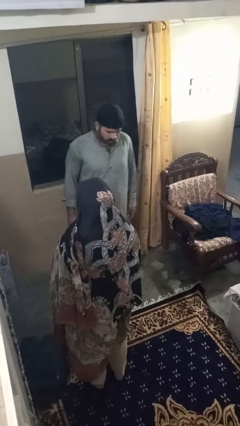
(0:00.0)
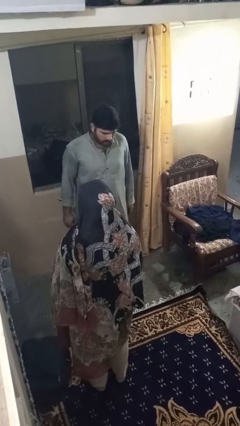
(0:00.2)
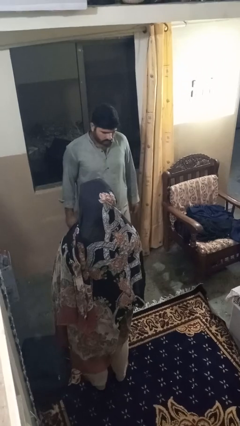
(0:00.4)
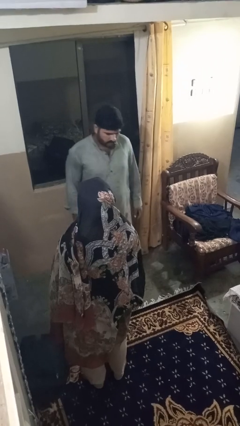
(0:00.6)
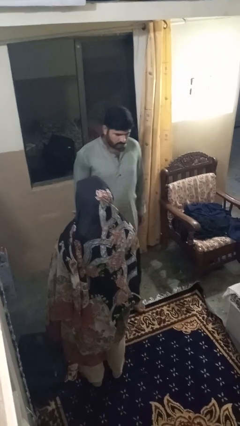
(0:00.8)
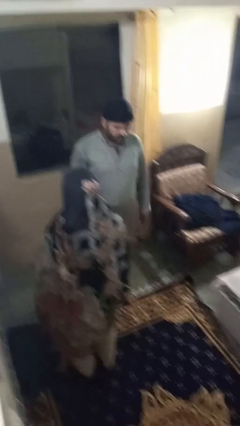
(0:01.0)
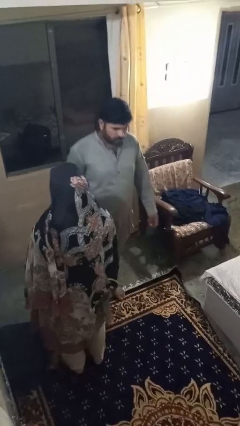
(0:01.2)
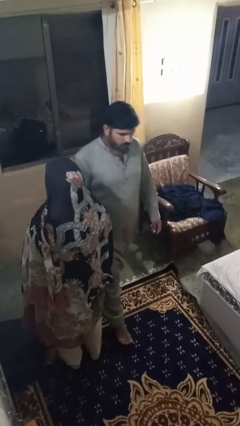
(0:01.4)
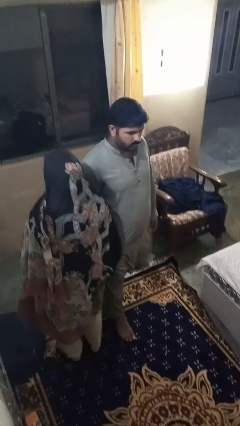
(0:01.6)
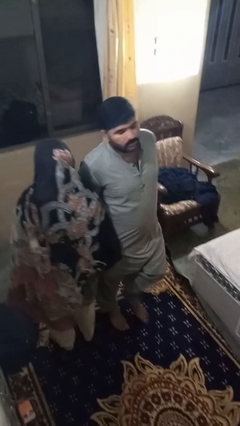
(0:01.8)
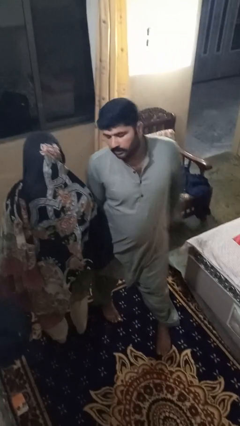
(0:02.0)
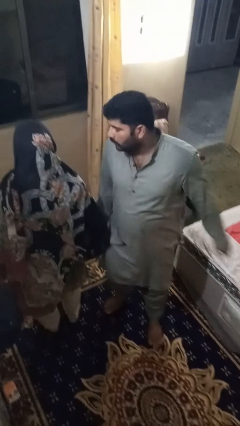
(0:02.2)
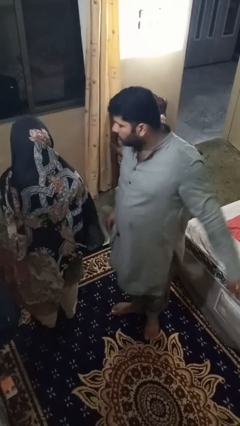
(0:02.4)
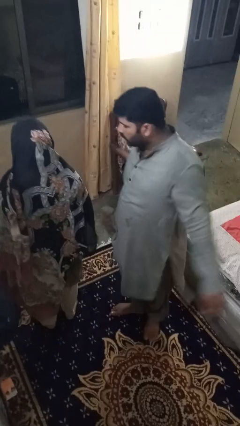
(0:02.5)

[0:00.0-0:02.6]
person bumps into person

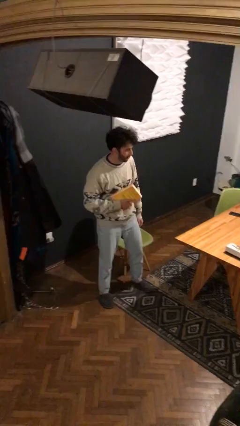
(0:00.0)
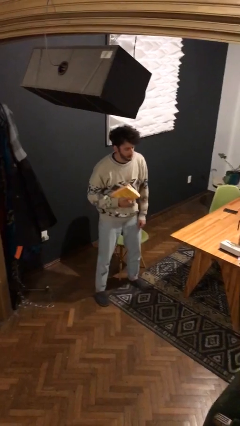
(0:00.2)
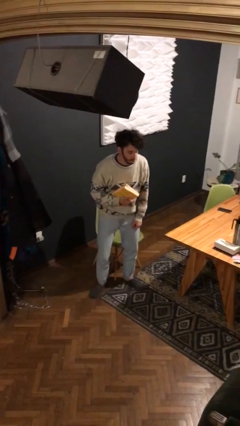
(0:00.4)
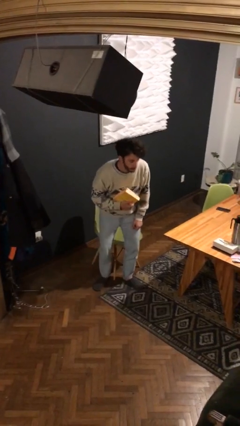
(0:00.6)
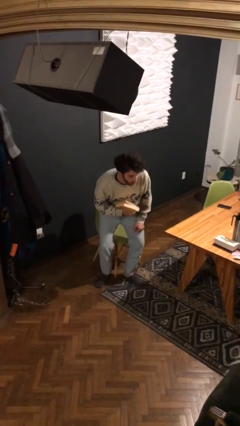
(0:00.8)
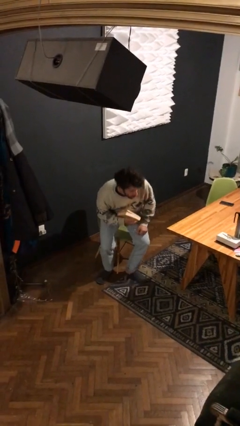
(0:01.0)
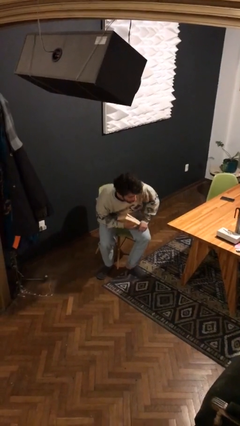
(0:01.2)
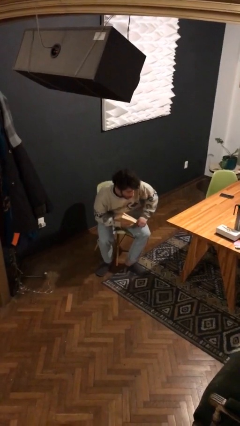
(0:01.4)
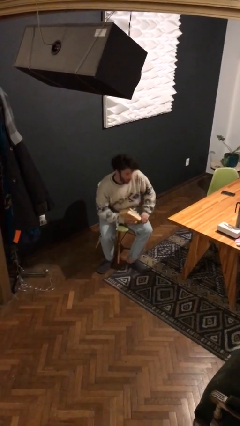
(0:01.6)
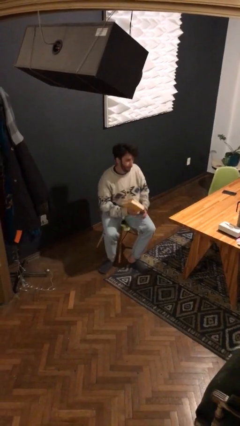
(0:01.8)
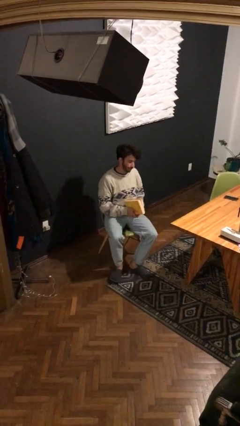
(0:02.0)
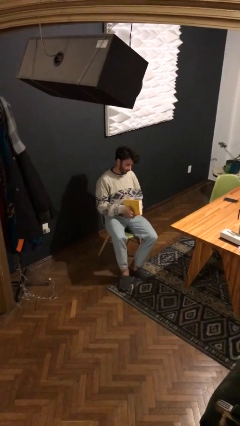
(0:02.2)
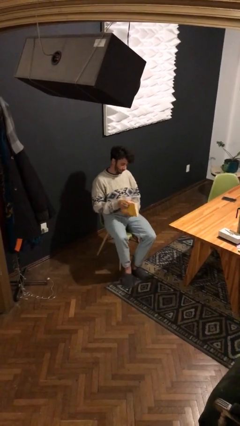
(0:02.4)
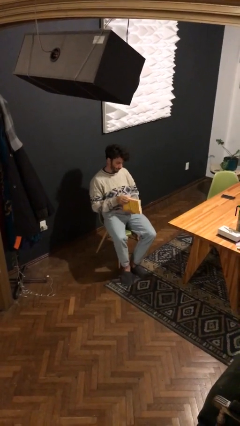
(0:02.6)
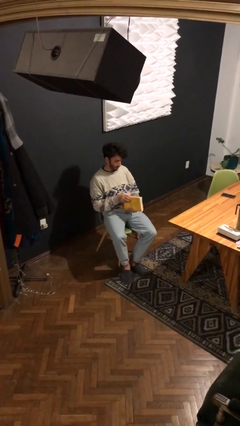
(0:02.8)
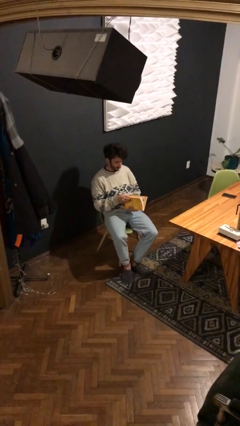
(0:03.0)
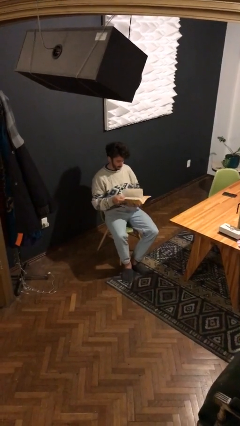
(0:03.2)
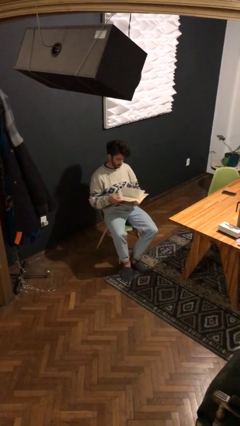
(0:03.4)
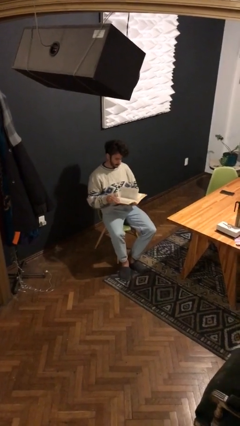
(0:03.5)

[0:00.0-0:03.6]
person sits down

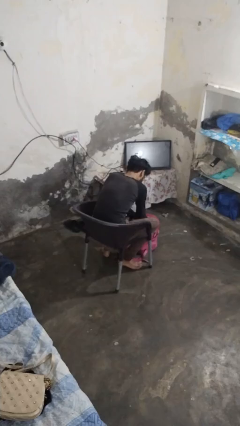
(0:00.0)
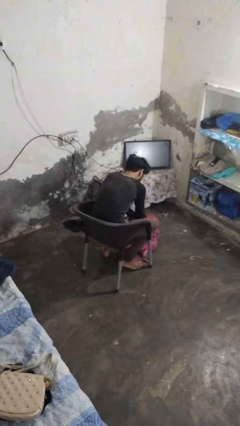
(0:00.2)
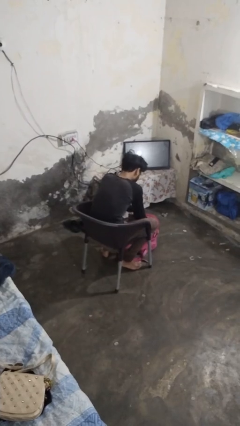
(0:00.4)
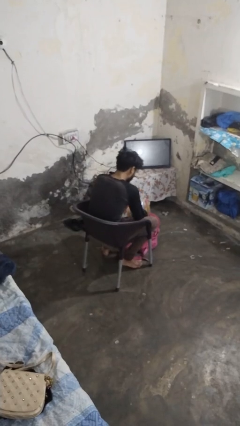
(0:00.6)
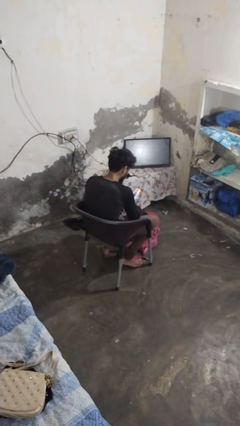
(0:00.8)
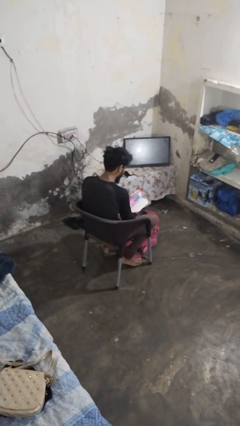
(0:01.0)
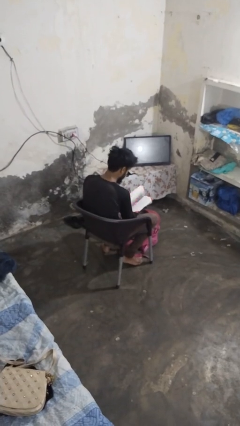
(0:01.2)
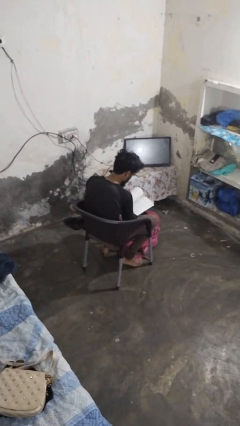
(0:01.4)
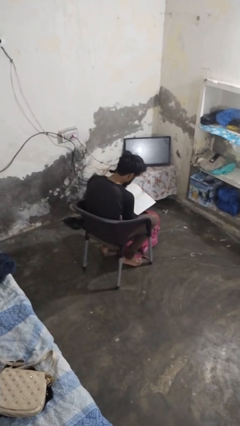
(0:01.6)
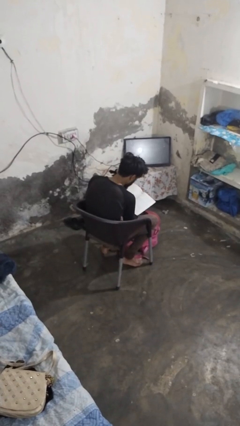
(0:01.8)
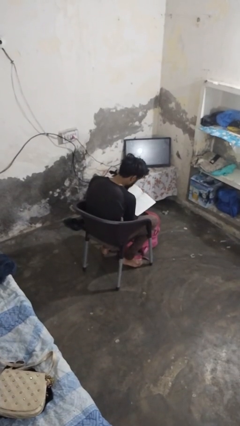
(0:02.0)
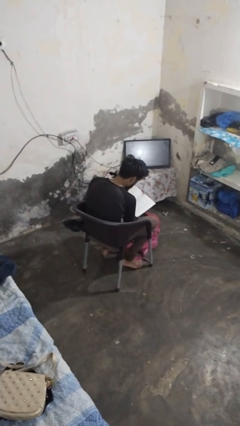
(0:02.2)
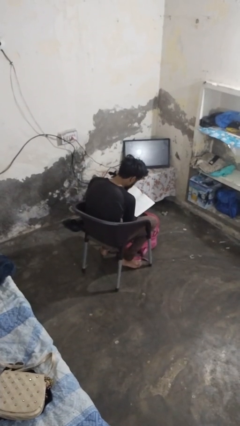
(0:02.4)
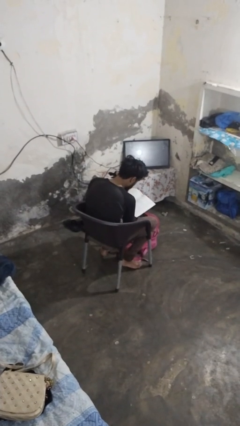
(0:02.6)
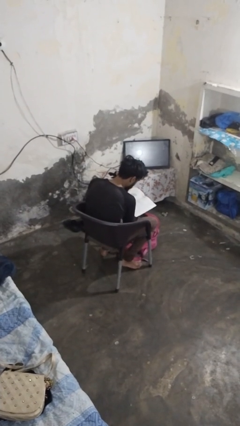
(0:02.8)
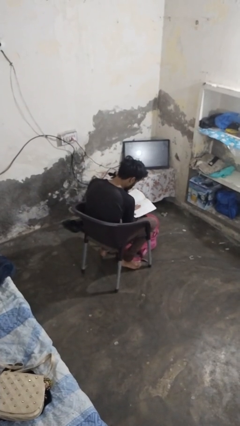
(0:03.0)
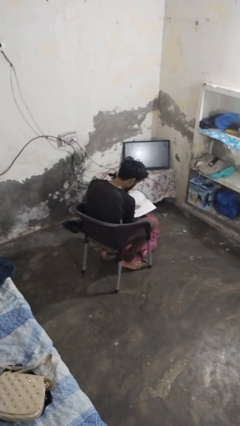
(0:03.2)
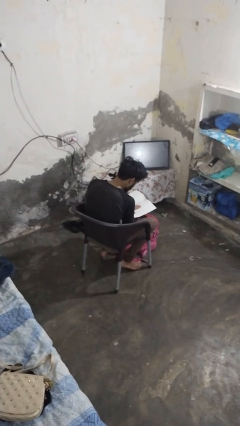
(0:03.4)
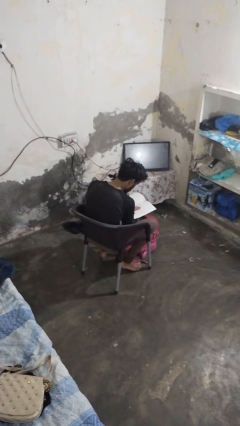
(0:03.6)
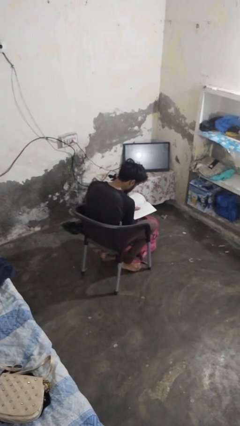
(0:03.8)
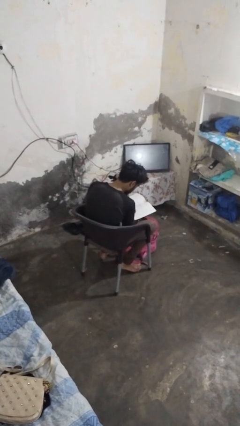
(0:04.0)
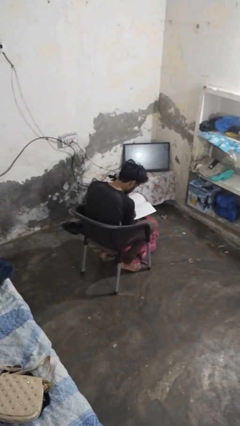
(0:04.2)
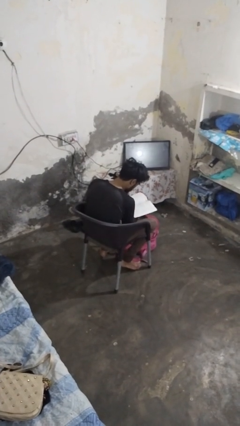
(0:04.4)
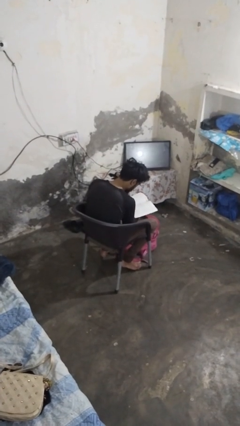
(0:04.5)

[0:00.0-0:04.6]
person takes object from backpack

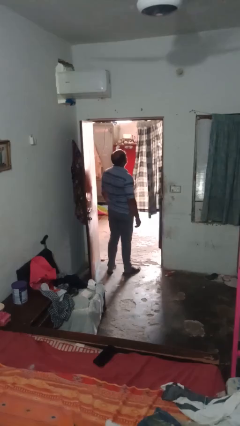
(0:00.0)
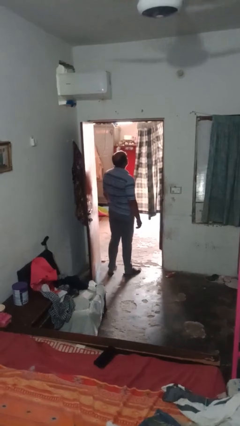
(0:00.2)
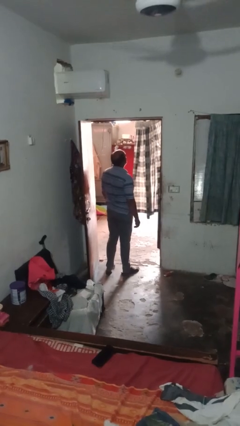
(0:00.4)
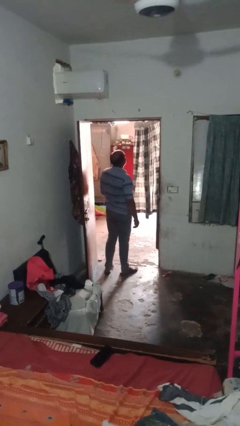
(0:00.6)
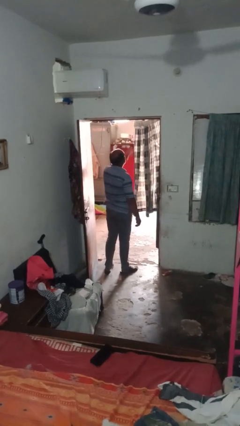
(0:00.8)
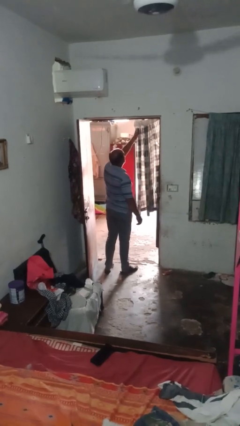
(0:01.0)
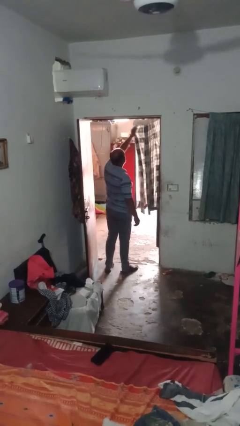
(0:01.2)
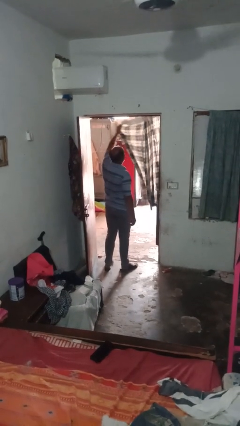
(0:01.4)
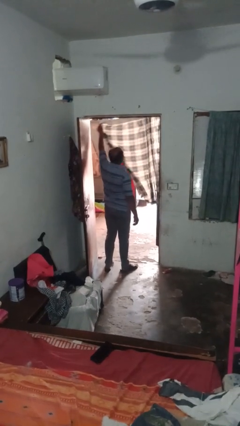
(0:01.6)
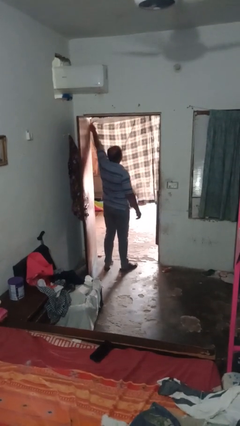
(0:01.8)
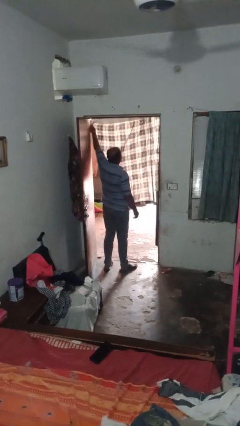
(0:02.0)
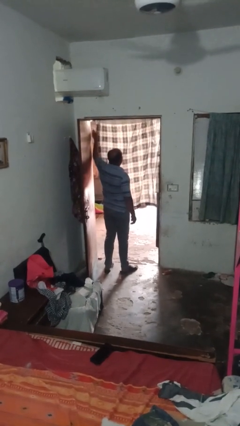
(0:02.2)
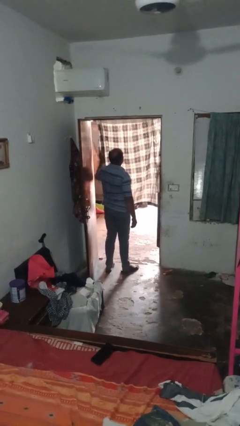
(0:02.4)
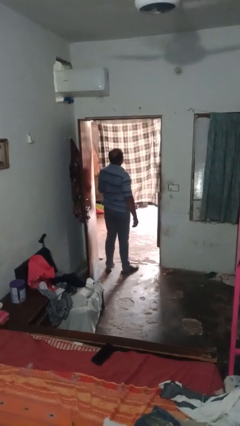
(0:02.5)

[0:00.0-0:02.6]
person closes curtains

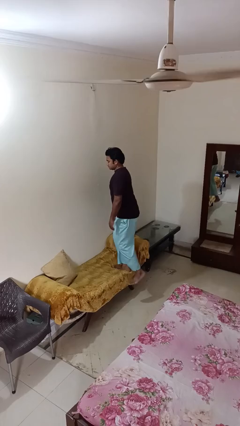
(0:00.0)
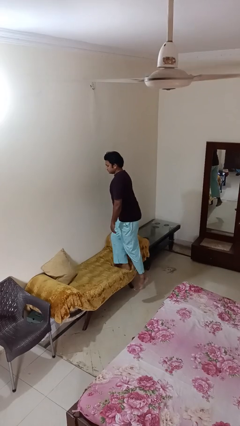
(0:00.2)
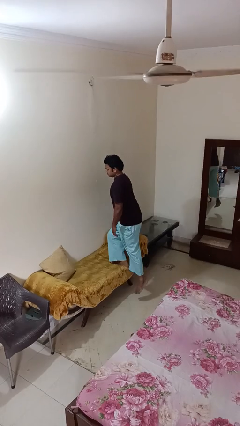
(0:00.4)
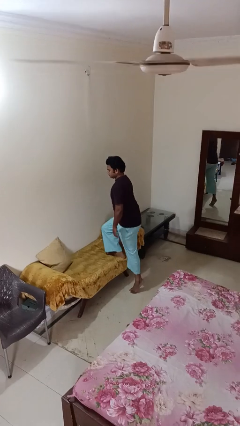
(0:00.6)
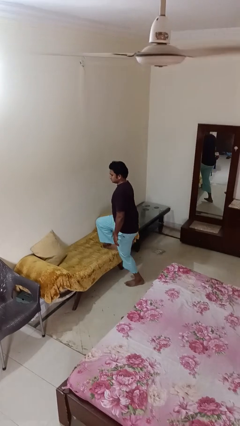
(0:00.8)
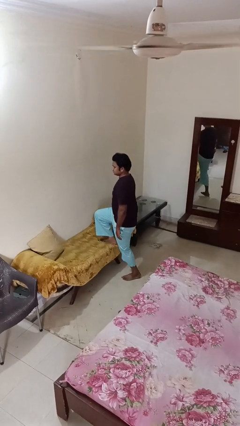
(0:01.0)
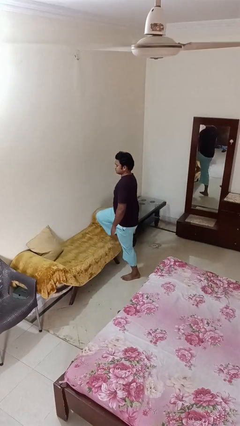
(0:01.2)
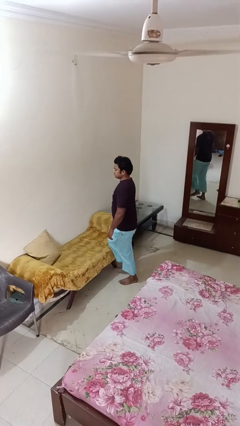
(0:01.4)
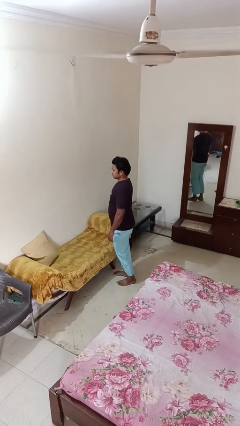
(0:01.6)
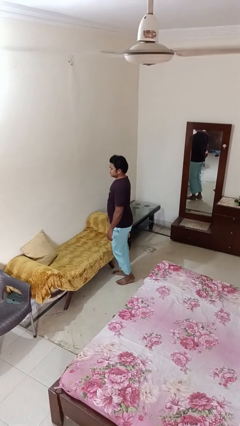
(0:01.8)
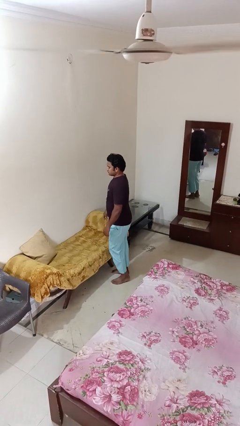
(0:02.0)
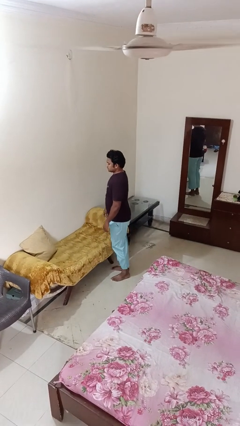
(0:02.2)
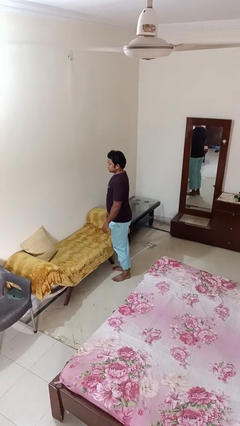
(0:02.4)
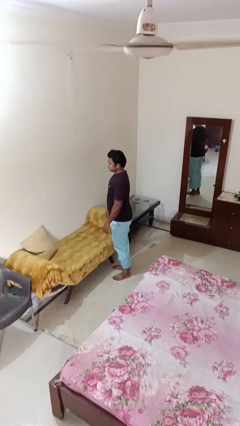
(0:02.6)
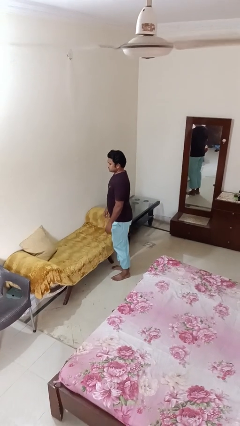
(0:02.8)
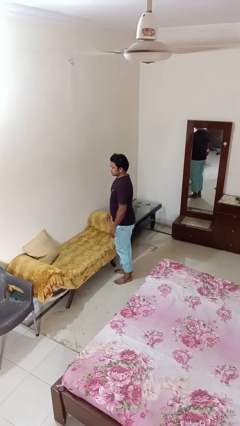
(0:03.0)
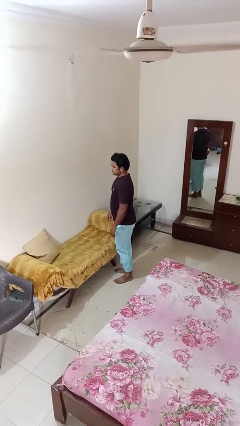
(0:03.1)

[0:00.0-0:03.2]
person climbs off couch

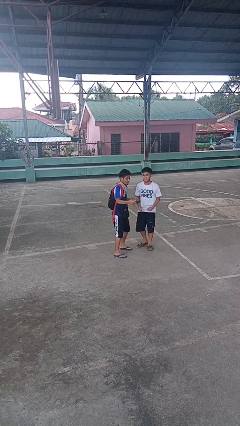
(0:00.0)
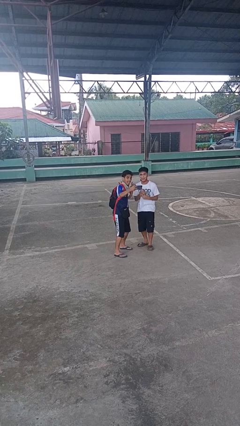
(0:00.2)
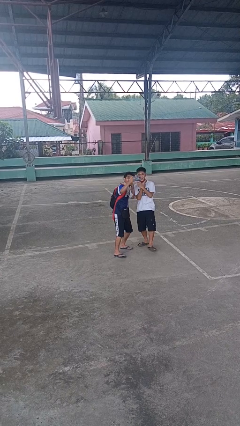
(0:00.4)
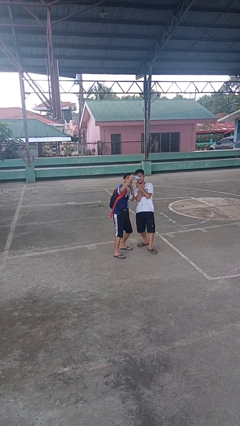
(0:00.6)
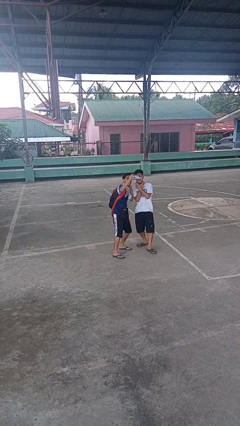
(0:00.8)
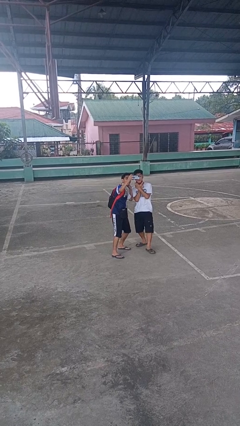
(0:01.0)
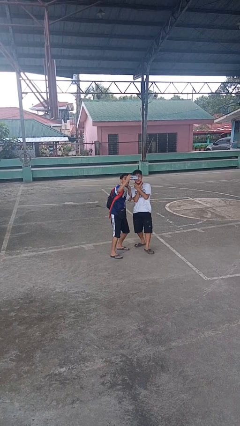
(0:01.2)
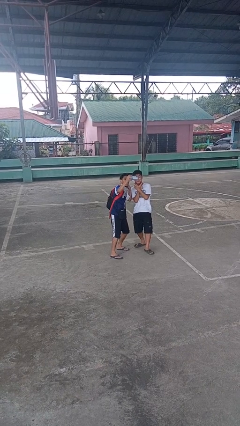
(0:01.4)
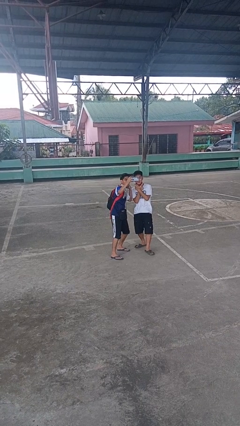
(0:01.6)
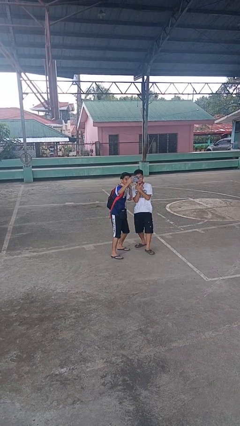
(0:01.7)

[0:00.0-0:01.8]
person takes selfie with person
